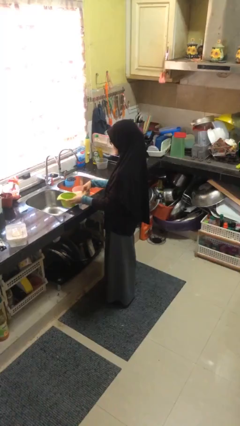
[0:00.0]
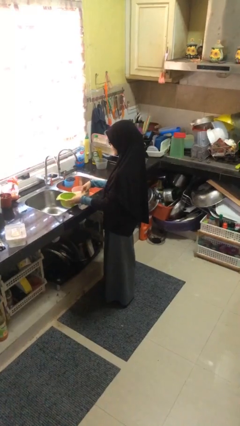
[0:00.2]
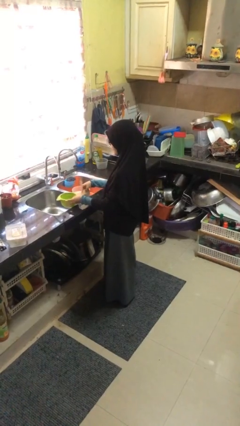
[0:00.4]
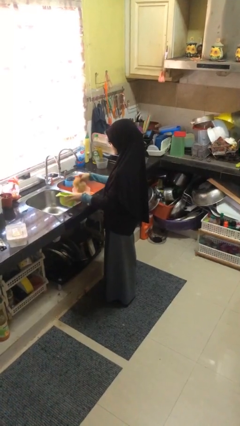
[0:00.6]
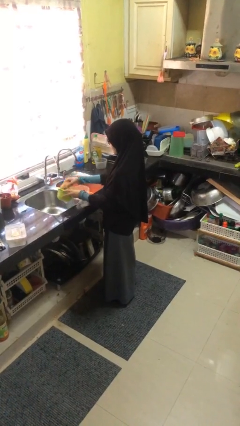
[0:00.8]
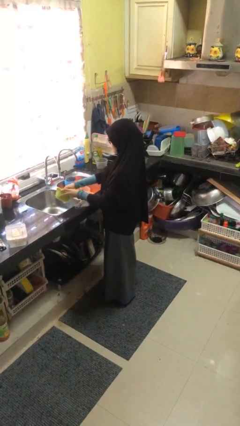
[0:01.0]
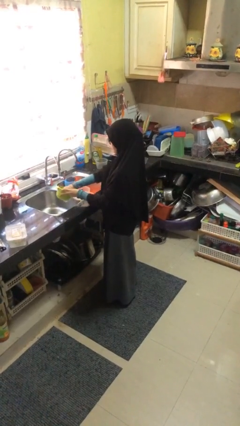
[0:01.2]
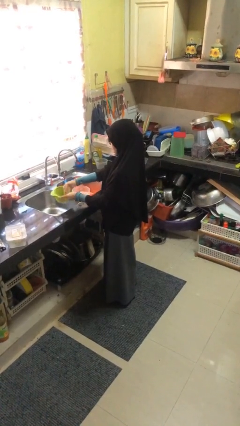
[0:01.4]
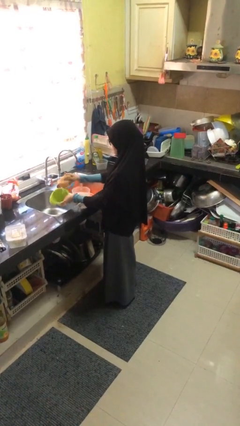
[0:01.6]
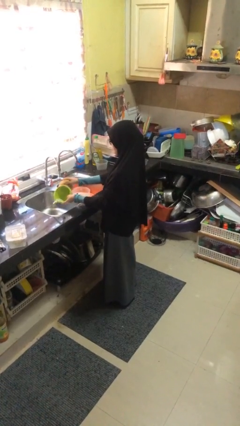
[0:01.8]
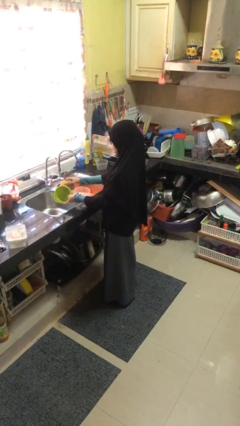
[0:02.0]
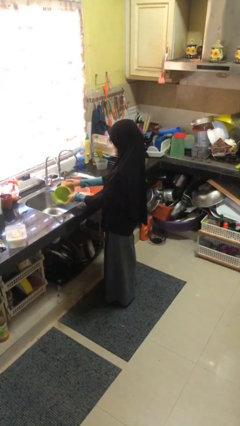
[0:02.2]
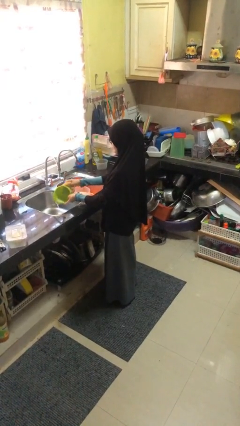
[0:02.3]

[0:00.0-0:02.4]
person washes dish

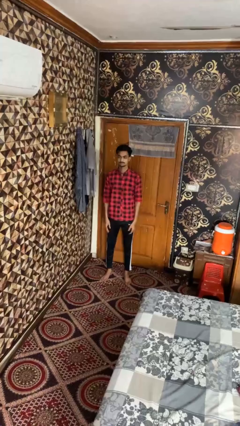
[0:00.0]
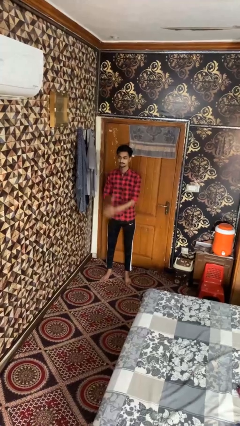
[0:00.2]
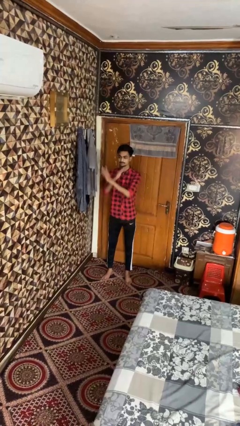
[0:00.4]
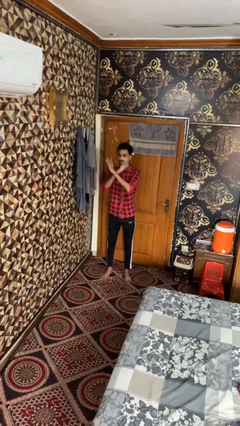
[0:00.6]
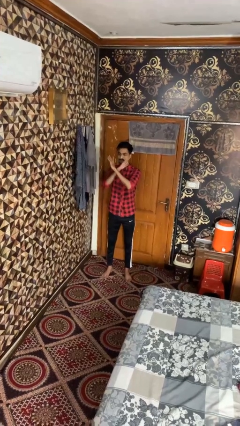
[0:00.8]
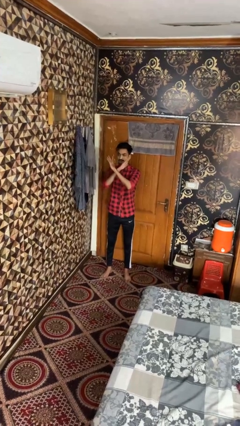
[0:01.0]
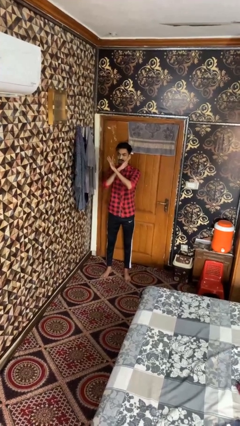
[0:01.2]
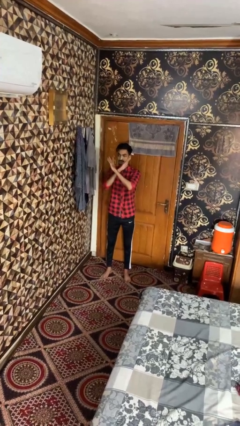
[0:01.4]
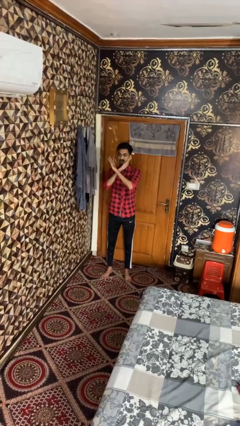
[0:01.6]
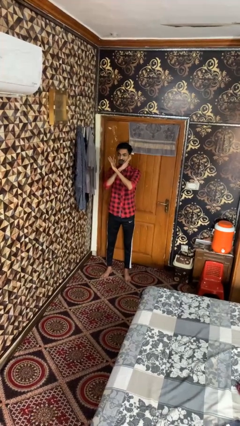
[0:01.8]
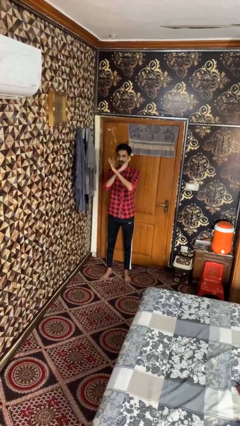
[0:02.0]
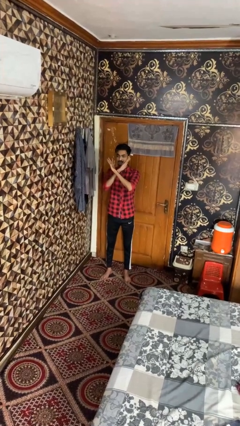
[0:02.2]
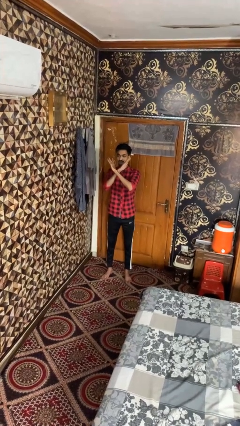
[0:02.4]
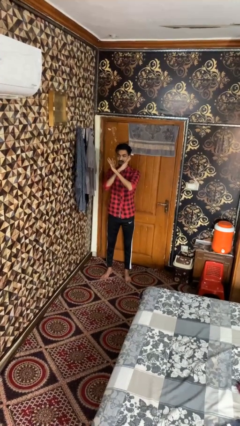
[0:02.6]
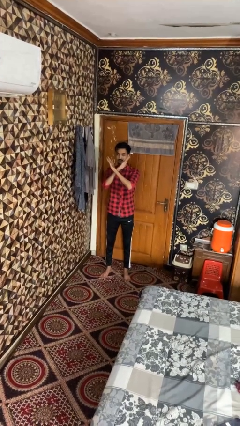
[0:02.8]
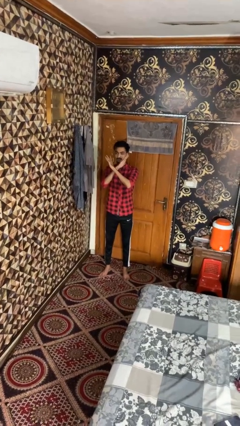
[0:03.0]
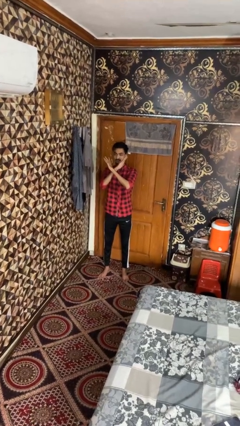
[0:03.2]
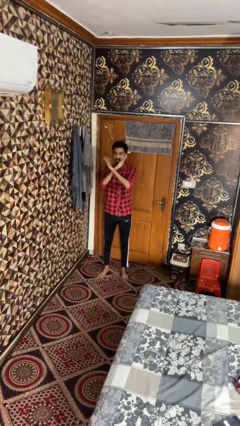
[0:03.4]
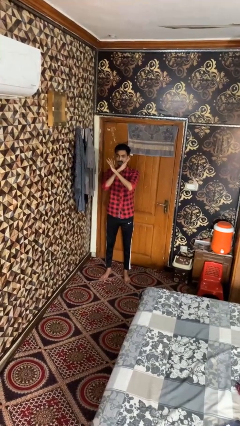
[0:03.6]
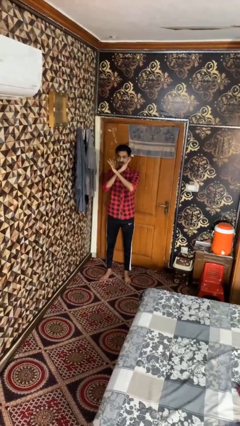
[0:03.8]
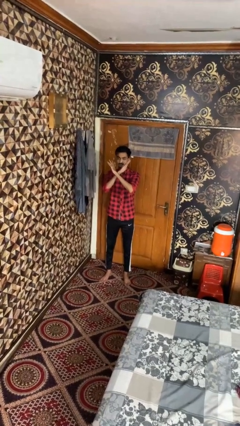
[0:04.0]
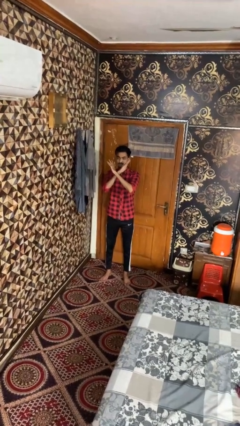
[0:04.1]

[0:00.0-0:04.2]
person gestures arms x

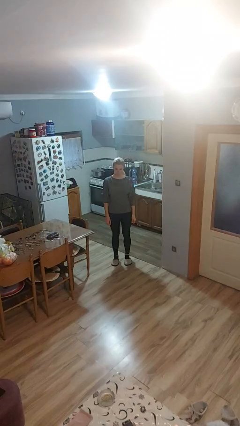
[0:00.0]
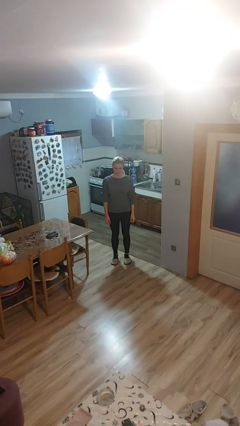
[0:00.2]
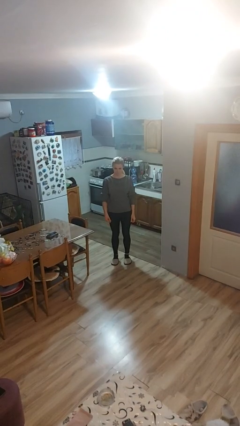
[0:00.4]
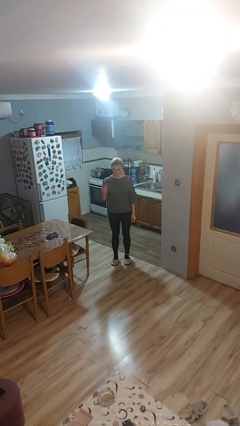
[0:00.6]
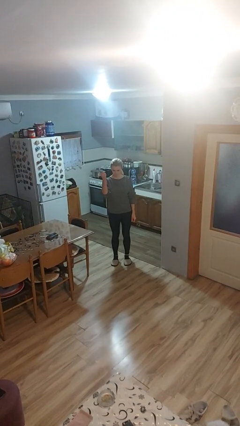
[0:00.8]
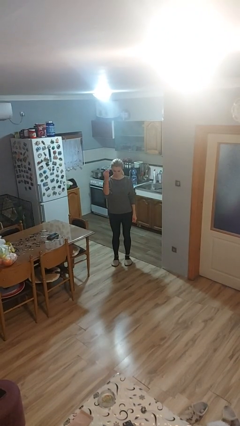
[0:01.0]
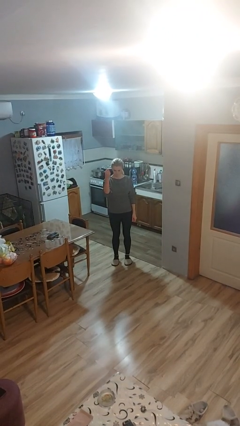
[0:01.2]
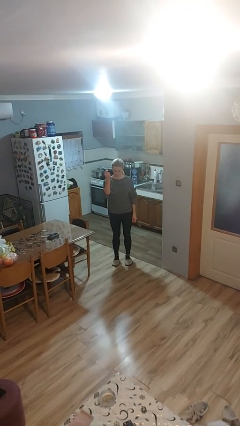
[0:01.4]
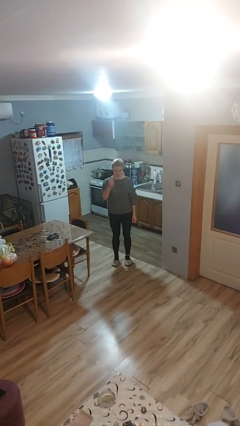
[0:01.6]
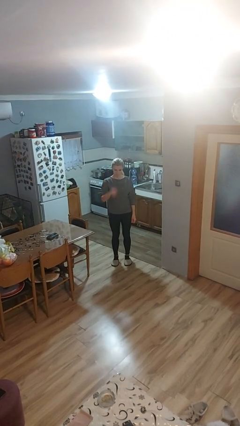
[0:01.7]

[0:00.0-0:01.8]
person snaps fingers

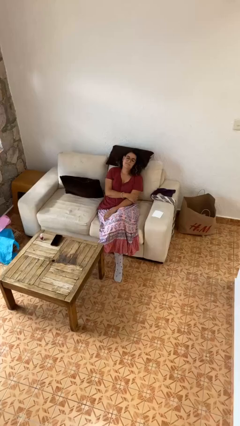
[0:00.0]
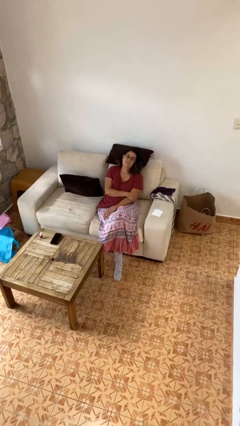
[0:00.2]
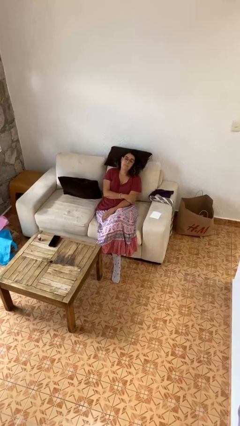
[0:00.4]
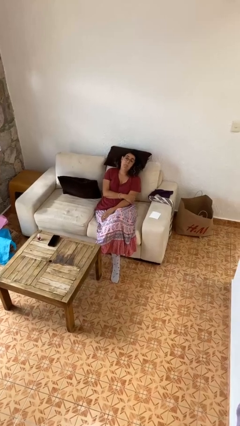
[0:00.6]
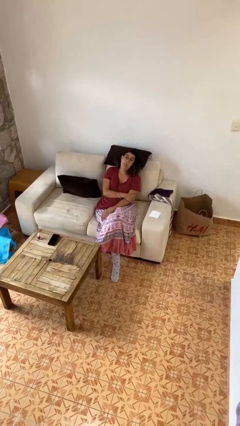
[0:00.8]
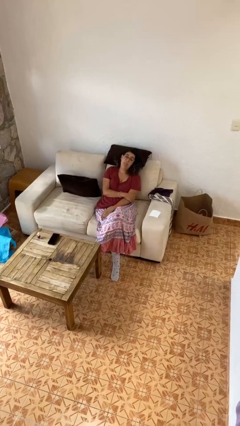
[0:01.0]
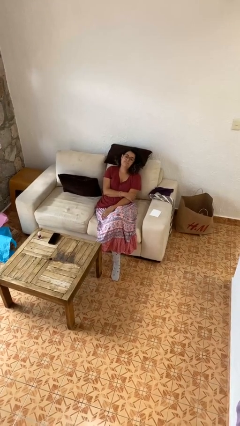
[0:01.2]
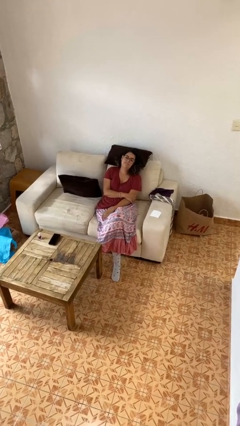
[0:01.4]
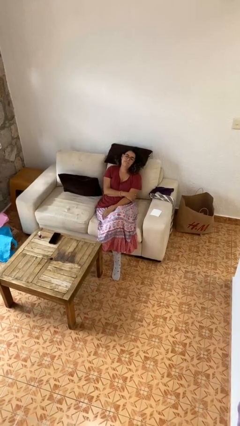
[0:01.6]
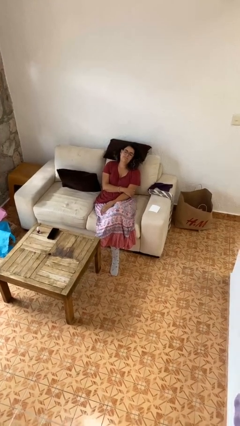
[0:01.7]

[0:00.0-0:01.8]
person sticks out tongue

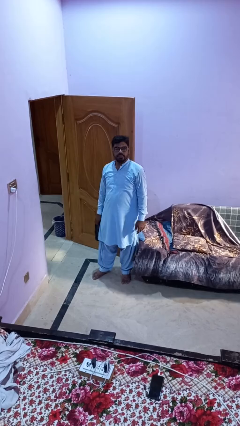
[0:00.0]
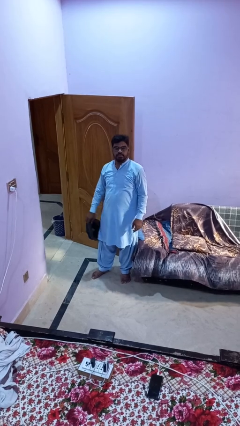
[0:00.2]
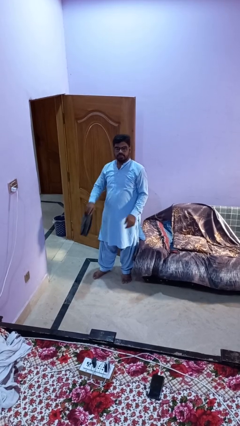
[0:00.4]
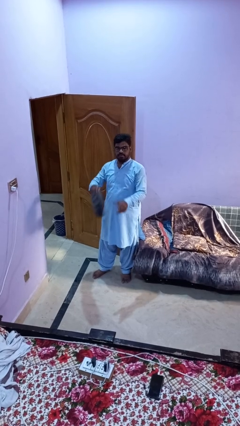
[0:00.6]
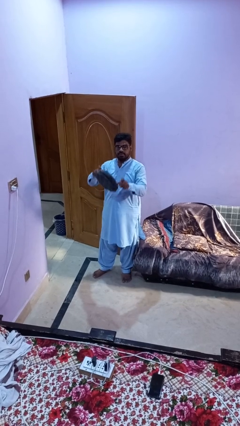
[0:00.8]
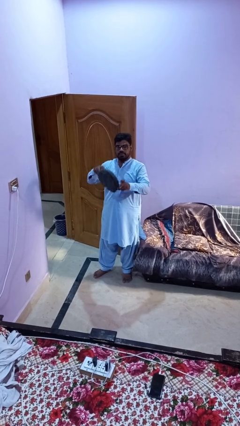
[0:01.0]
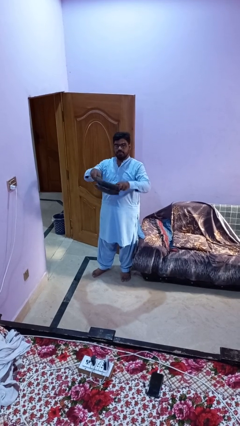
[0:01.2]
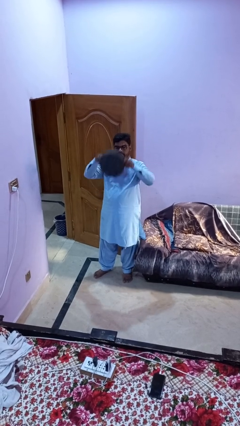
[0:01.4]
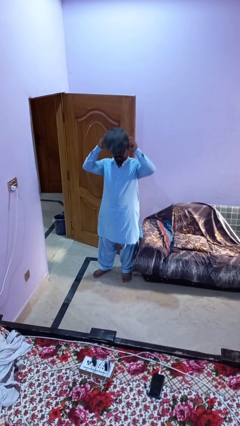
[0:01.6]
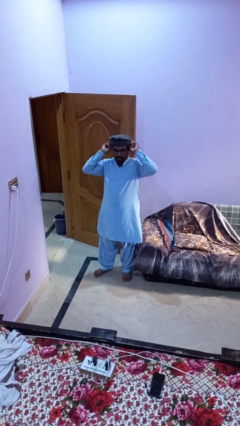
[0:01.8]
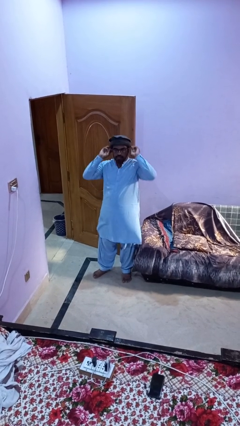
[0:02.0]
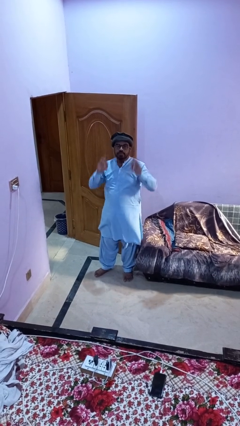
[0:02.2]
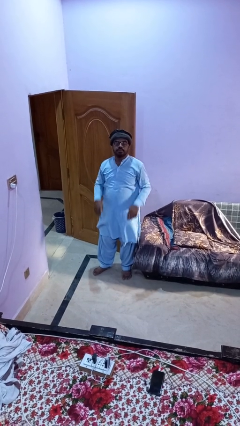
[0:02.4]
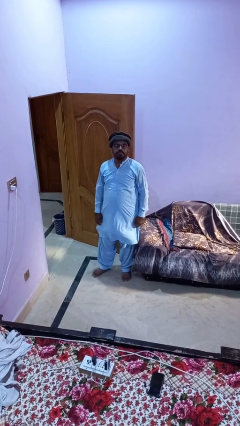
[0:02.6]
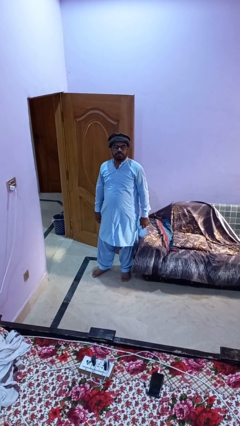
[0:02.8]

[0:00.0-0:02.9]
person puts on hat

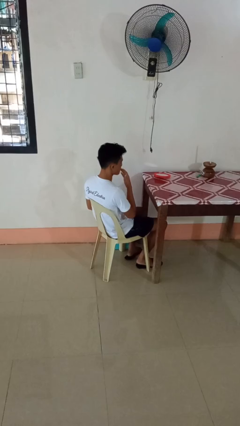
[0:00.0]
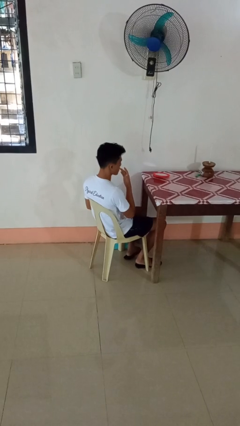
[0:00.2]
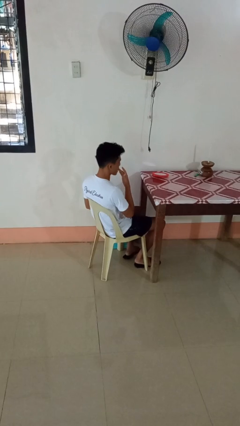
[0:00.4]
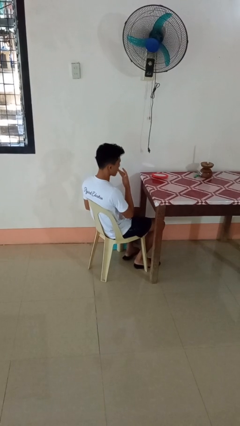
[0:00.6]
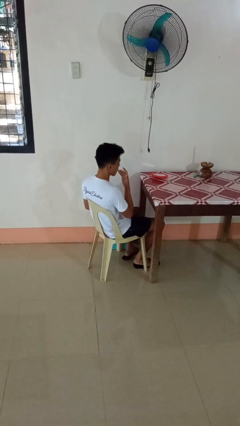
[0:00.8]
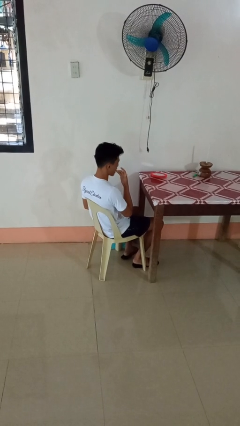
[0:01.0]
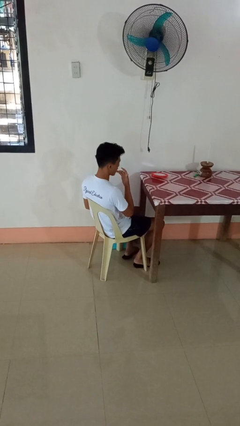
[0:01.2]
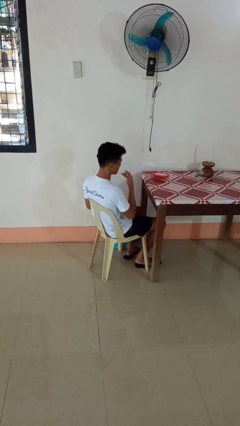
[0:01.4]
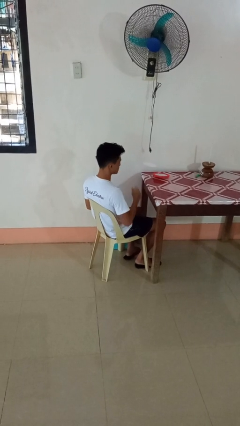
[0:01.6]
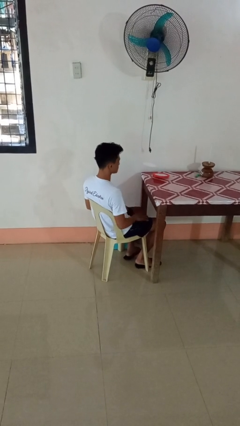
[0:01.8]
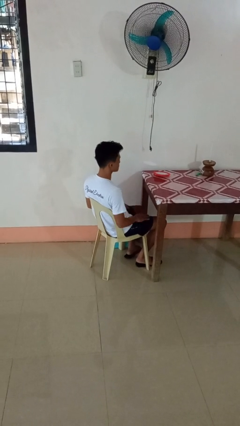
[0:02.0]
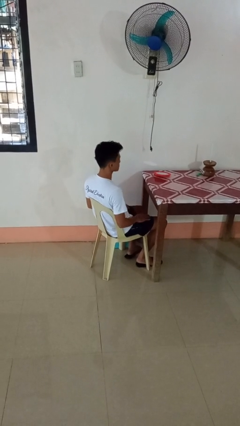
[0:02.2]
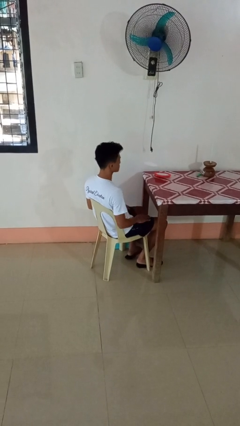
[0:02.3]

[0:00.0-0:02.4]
person licks fingers

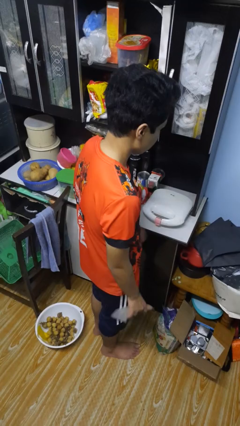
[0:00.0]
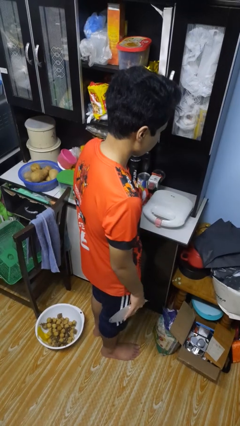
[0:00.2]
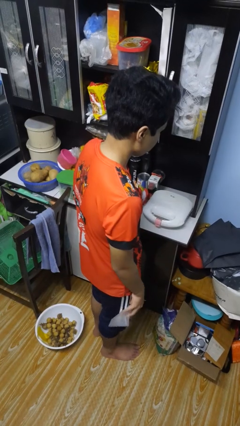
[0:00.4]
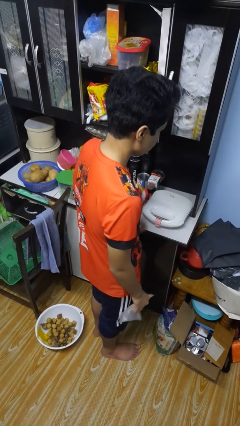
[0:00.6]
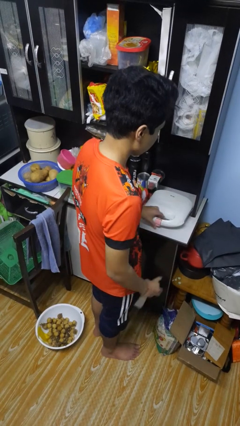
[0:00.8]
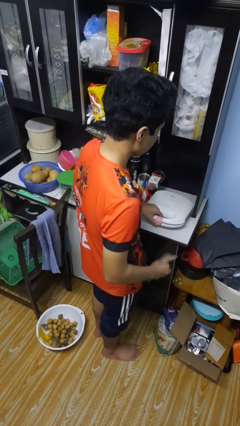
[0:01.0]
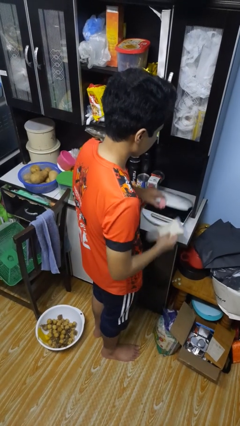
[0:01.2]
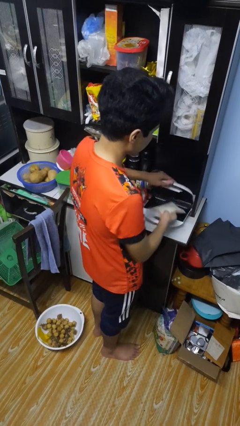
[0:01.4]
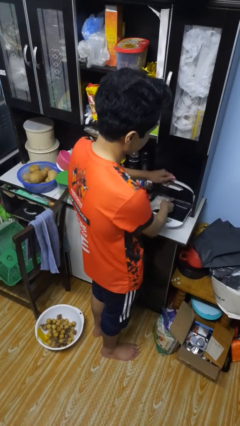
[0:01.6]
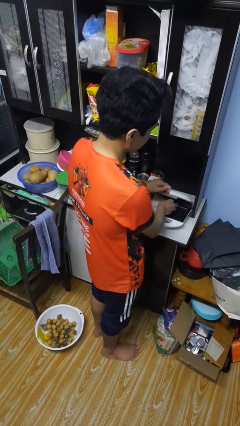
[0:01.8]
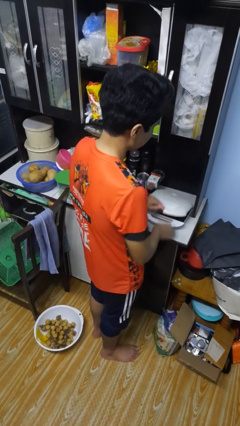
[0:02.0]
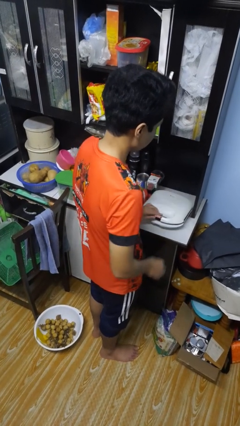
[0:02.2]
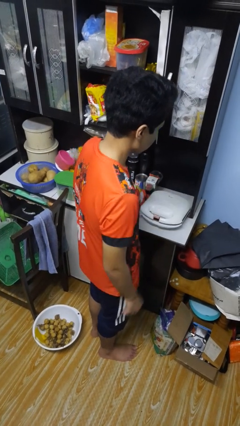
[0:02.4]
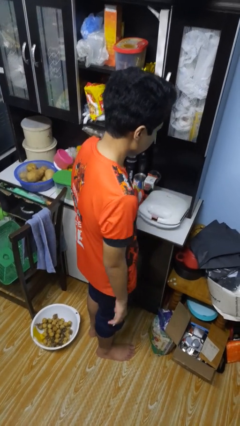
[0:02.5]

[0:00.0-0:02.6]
person puts object into toaster
